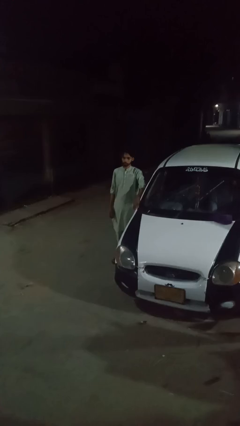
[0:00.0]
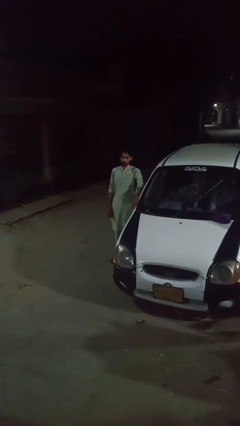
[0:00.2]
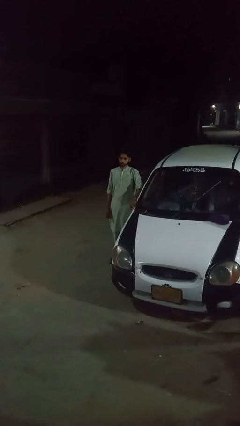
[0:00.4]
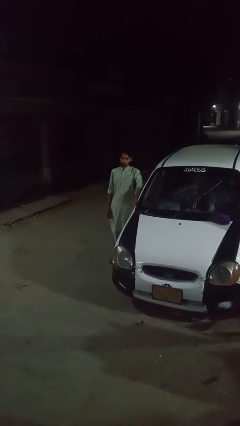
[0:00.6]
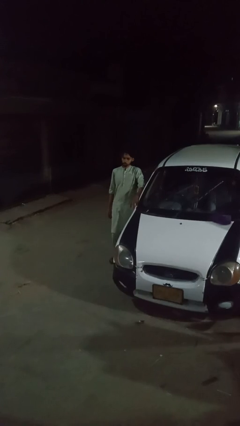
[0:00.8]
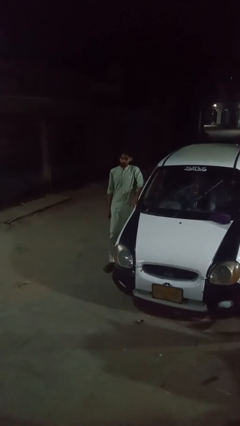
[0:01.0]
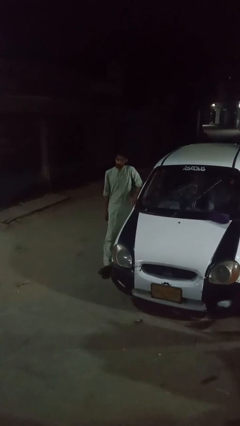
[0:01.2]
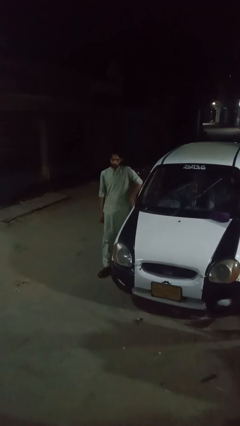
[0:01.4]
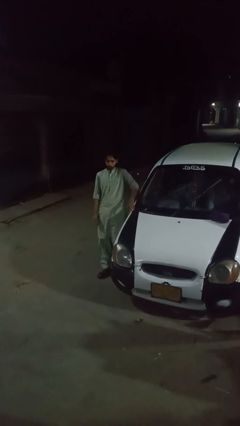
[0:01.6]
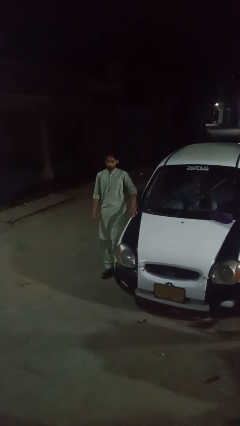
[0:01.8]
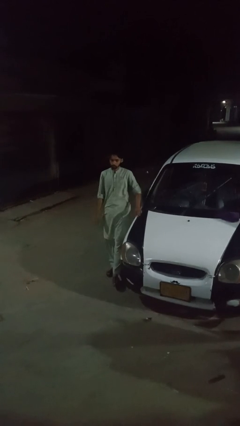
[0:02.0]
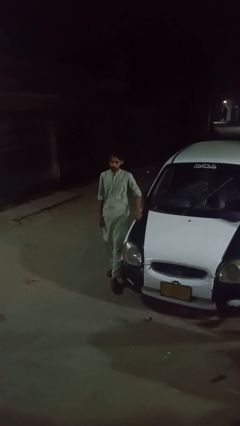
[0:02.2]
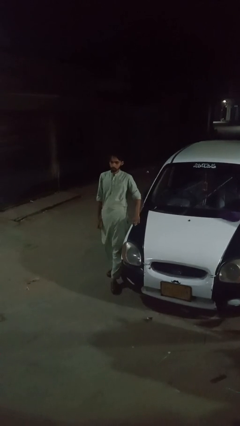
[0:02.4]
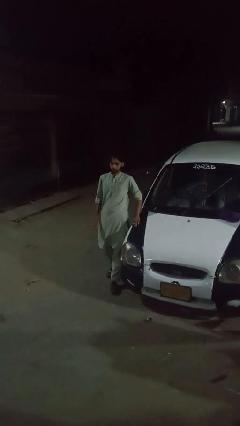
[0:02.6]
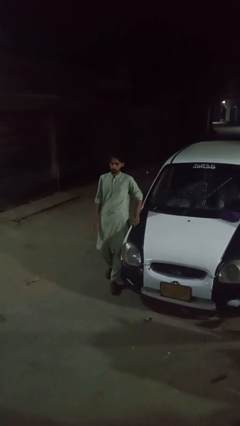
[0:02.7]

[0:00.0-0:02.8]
person walks around car

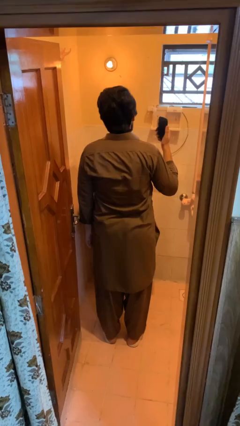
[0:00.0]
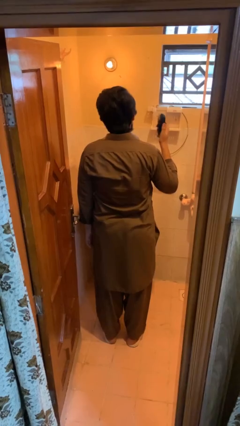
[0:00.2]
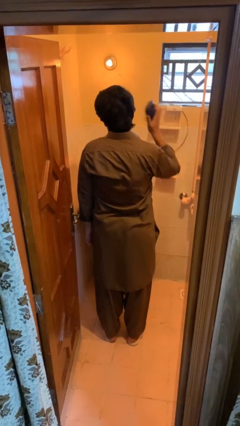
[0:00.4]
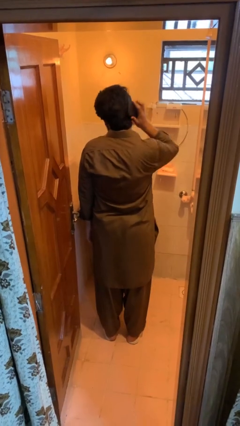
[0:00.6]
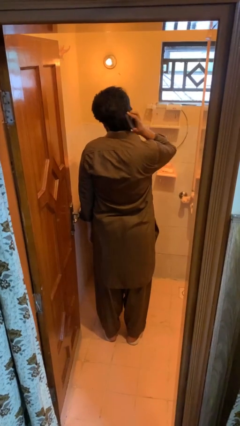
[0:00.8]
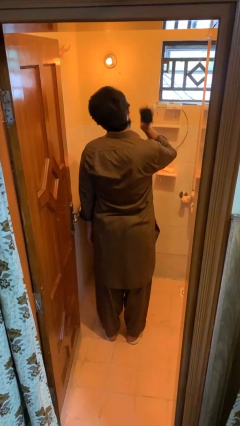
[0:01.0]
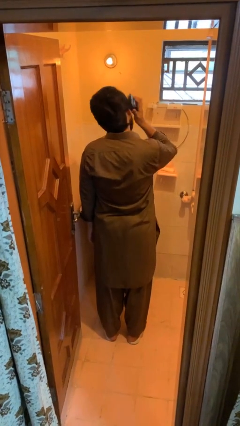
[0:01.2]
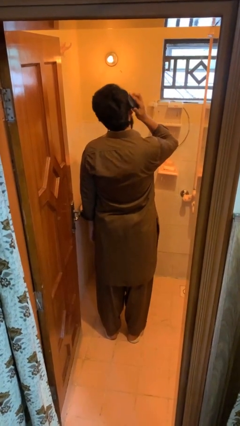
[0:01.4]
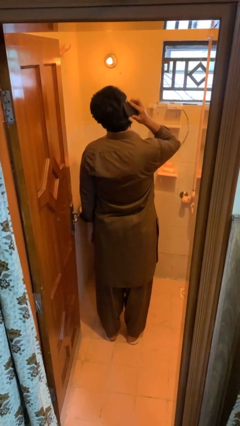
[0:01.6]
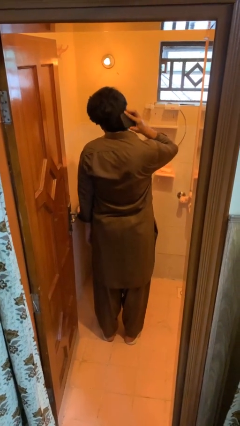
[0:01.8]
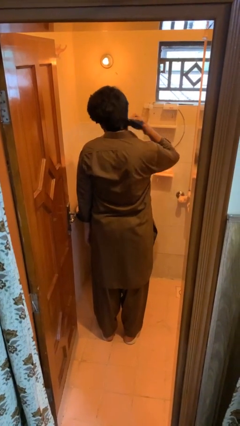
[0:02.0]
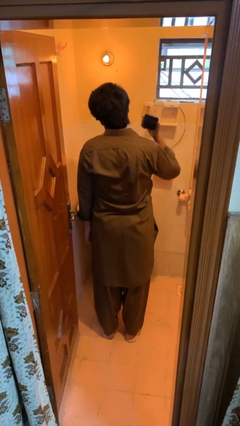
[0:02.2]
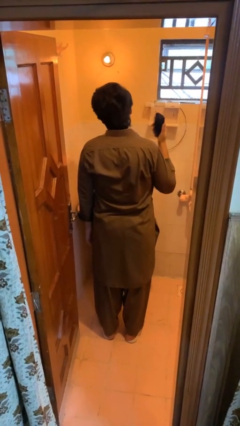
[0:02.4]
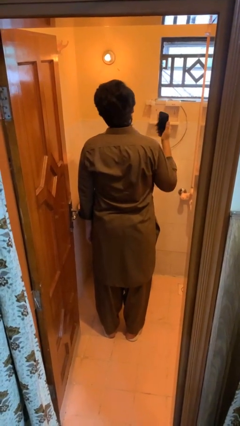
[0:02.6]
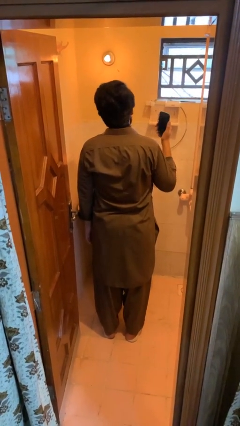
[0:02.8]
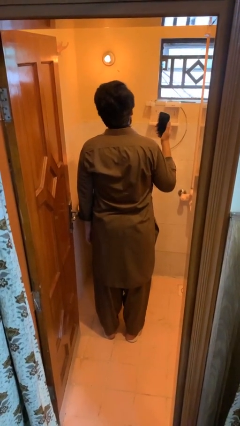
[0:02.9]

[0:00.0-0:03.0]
person brushes hair

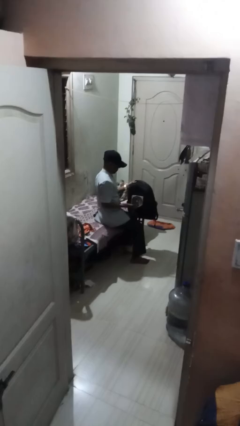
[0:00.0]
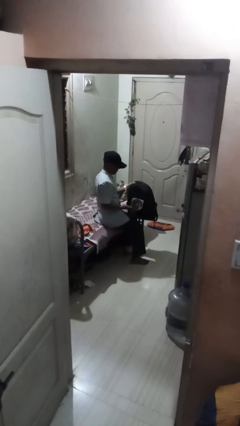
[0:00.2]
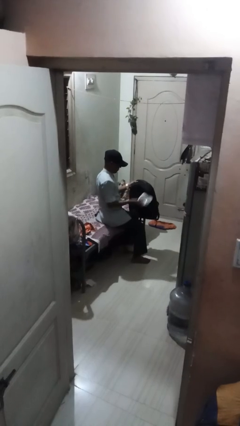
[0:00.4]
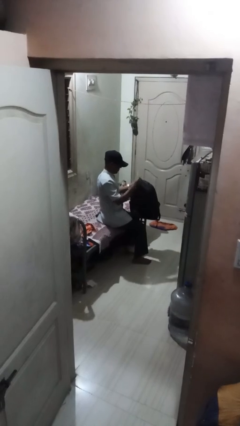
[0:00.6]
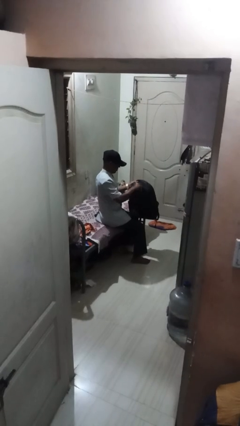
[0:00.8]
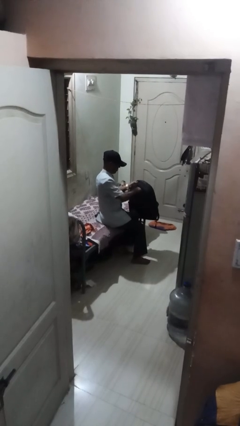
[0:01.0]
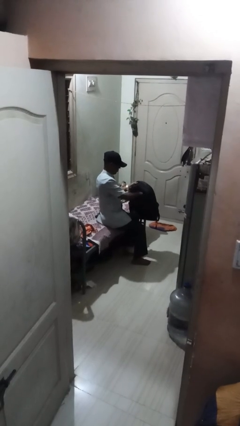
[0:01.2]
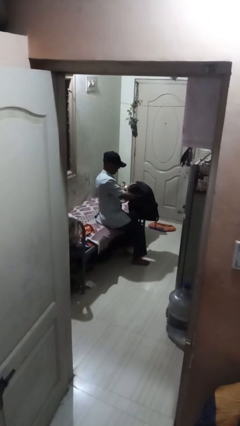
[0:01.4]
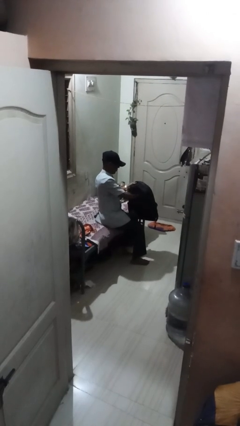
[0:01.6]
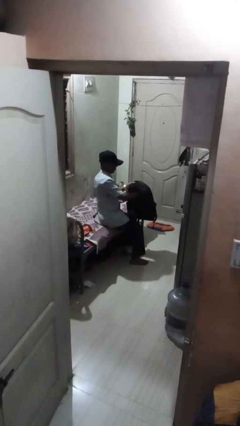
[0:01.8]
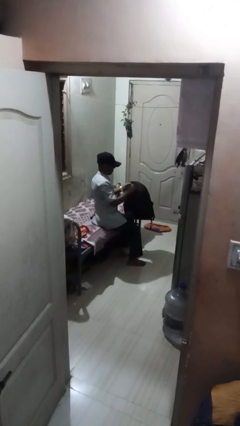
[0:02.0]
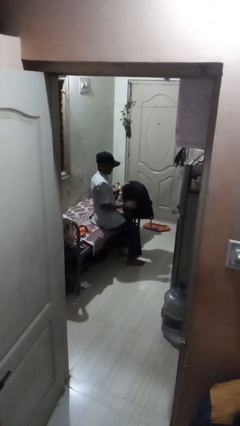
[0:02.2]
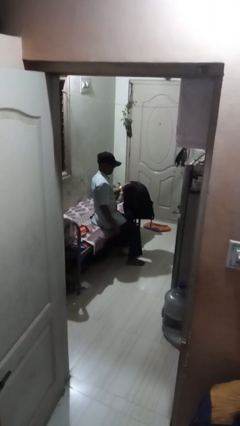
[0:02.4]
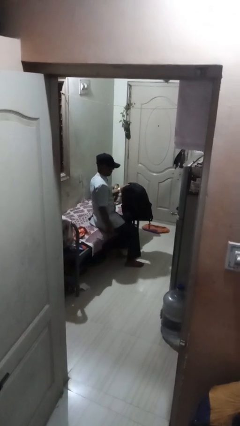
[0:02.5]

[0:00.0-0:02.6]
person puts object into backpack

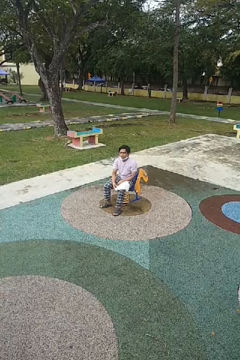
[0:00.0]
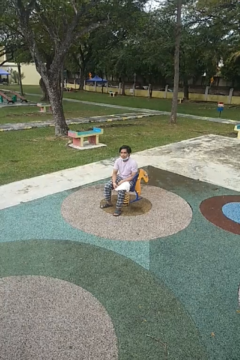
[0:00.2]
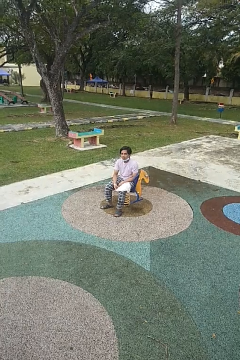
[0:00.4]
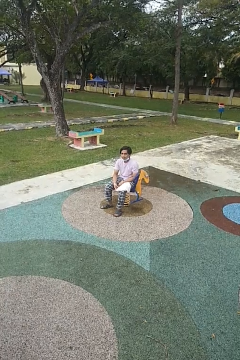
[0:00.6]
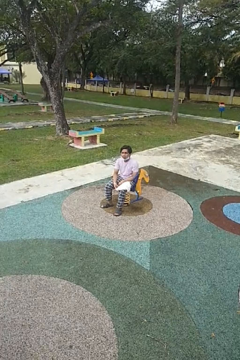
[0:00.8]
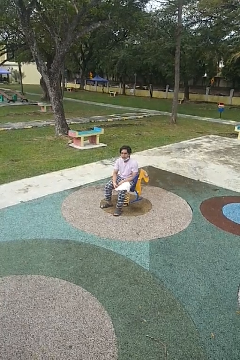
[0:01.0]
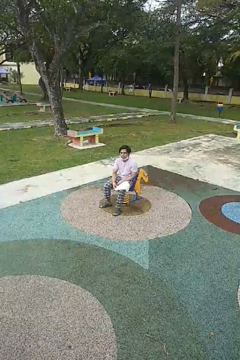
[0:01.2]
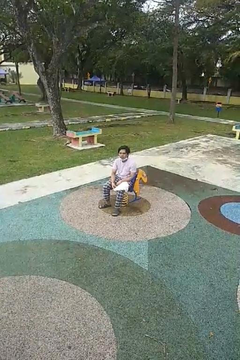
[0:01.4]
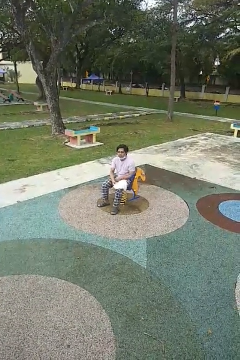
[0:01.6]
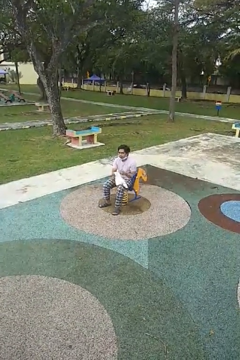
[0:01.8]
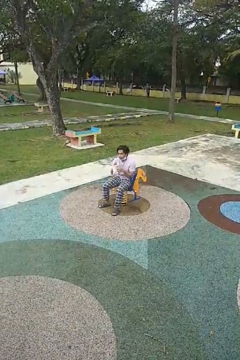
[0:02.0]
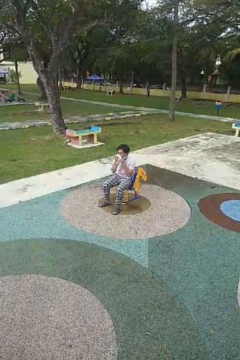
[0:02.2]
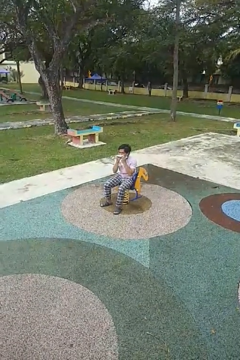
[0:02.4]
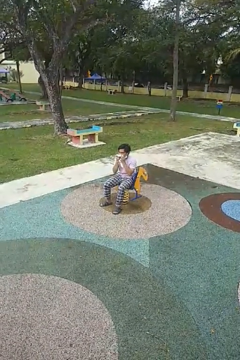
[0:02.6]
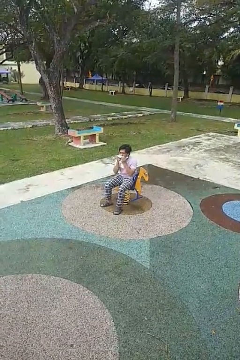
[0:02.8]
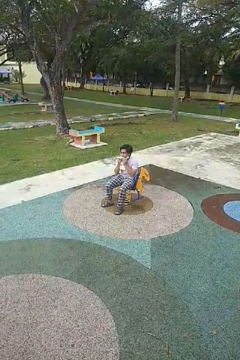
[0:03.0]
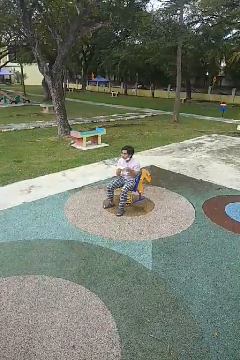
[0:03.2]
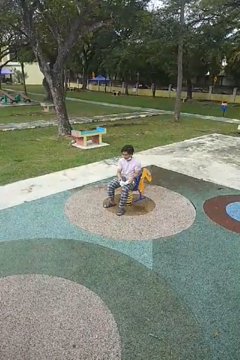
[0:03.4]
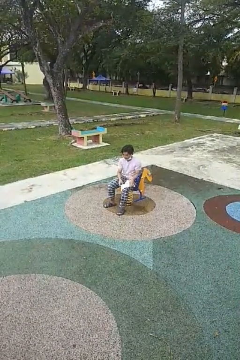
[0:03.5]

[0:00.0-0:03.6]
person wipes mouth with napkin

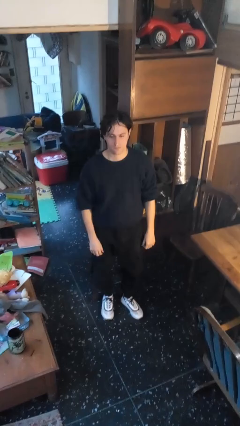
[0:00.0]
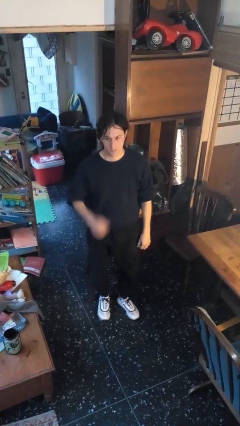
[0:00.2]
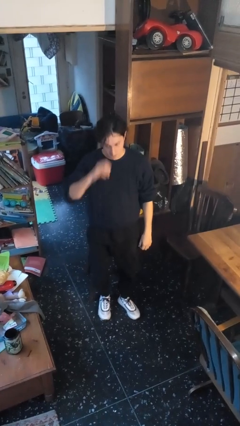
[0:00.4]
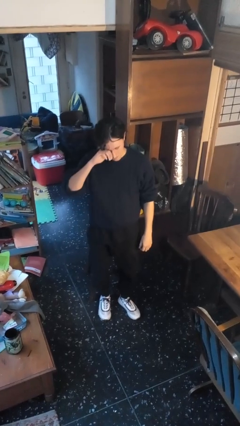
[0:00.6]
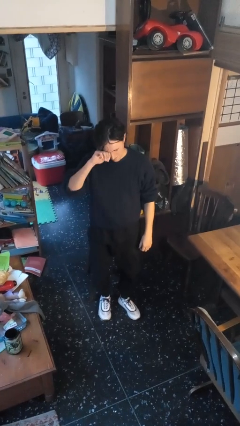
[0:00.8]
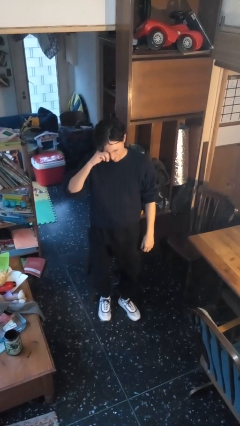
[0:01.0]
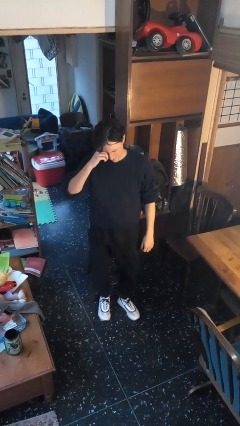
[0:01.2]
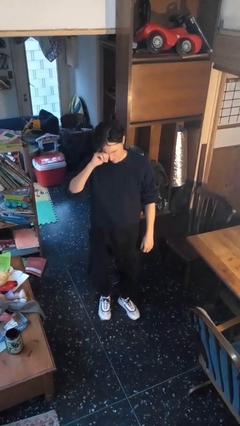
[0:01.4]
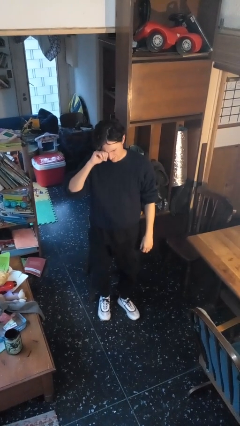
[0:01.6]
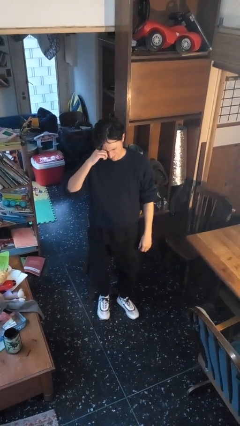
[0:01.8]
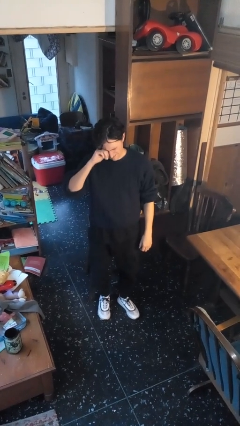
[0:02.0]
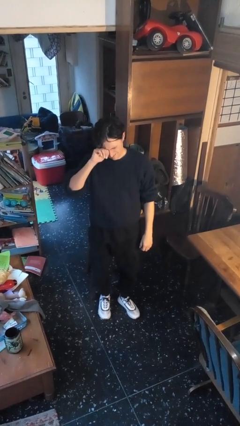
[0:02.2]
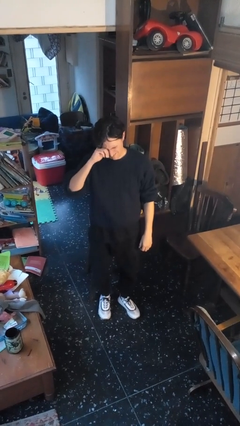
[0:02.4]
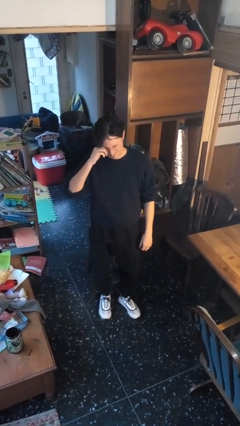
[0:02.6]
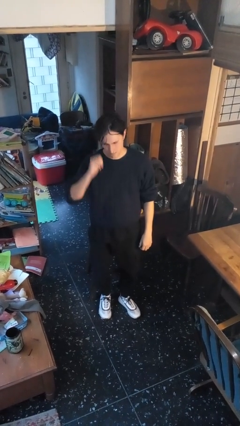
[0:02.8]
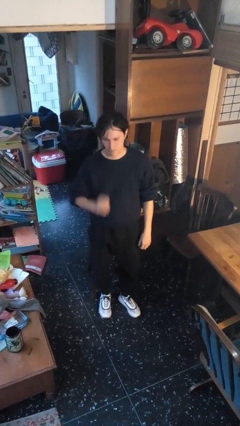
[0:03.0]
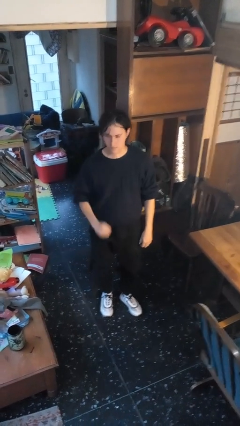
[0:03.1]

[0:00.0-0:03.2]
person rubs eyes

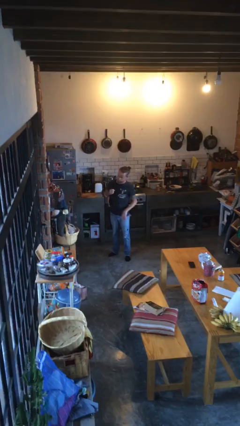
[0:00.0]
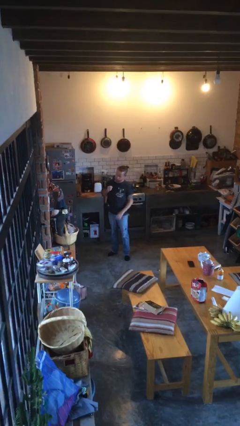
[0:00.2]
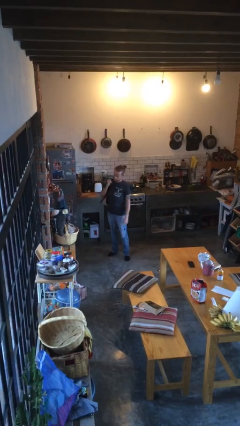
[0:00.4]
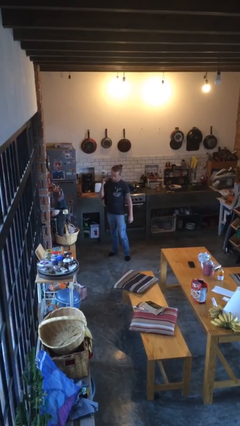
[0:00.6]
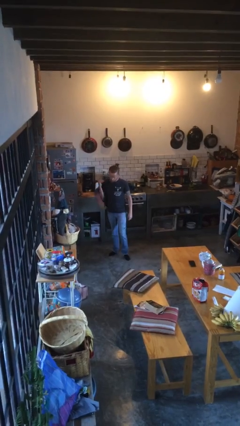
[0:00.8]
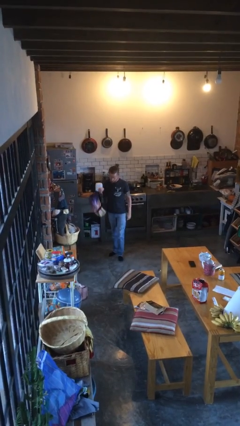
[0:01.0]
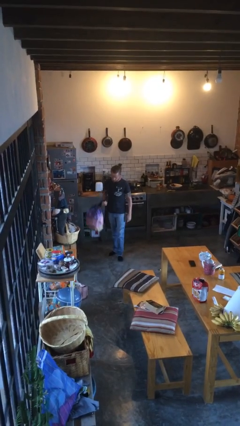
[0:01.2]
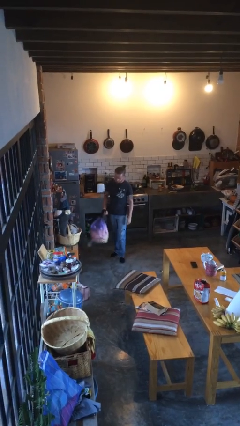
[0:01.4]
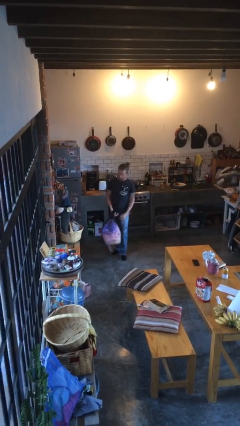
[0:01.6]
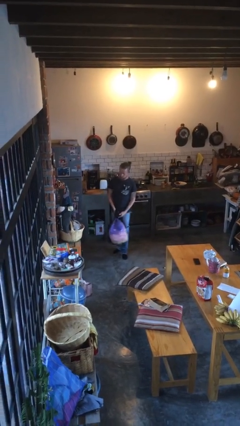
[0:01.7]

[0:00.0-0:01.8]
person takes off backpack

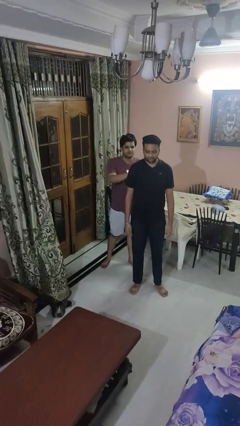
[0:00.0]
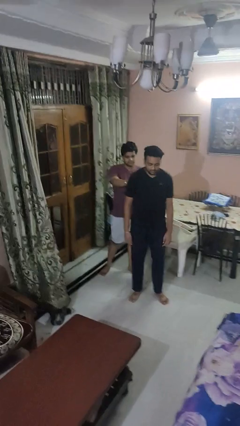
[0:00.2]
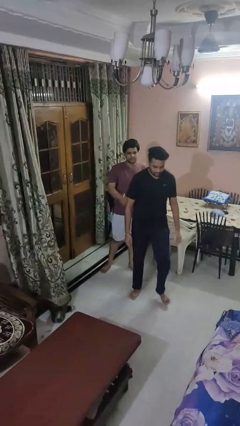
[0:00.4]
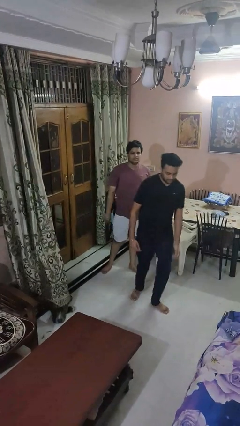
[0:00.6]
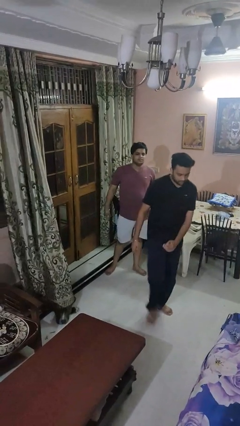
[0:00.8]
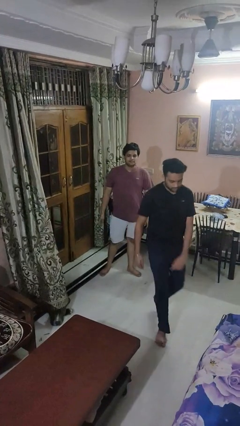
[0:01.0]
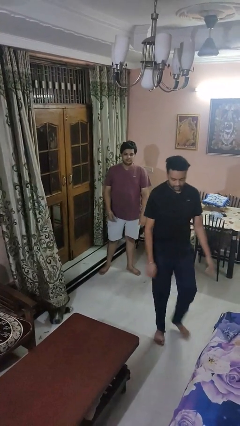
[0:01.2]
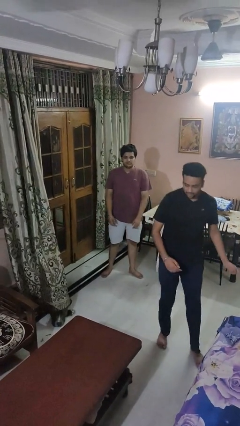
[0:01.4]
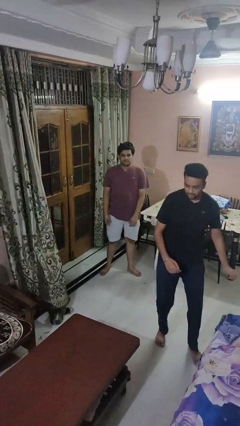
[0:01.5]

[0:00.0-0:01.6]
person shoves person
